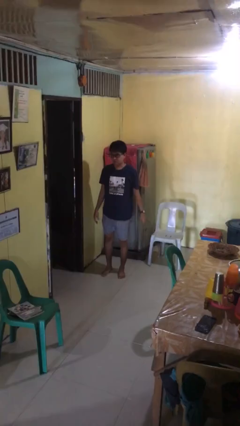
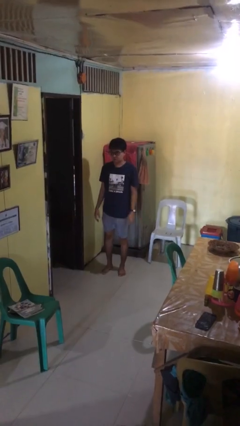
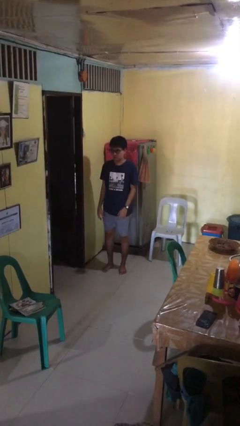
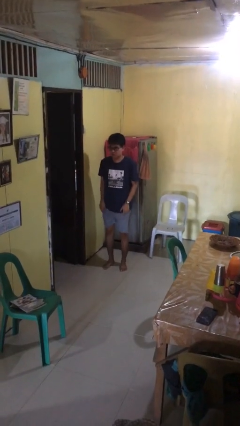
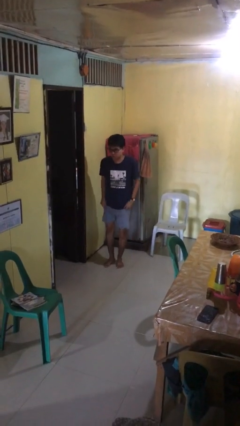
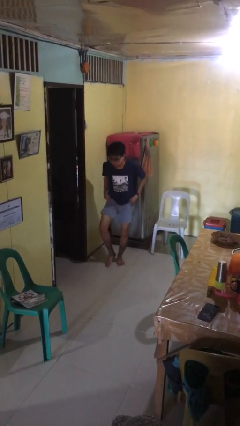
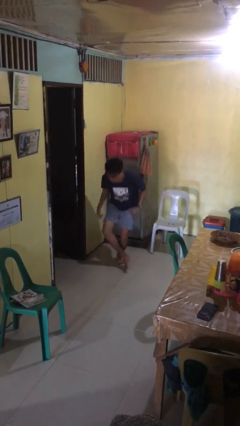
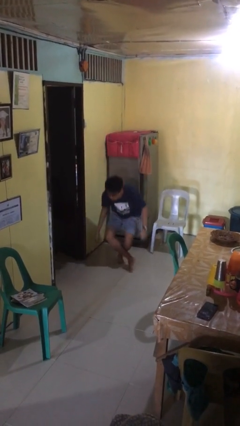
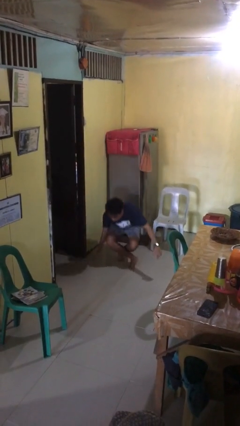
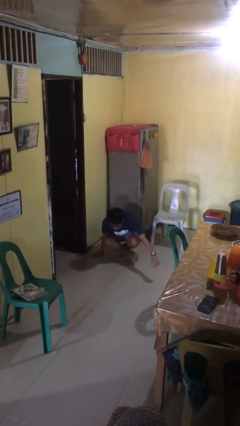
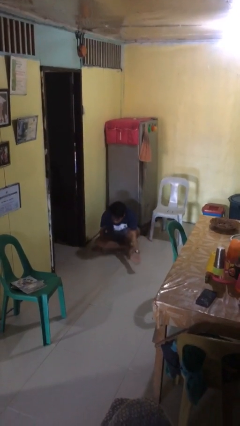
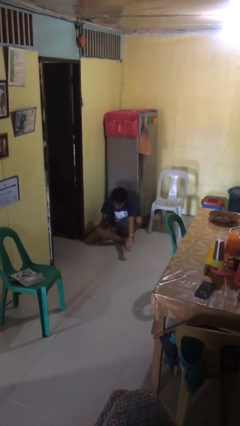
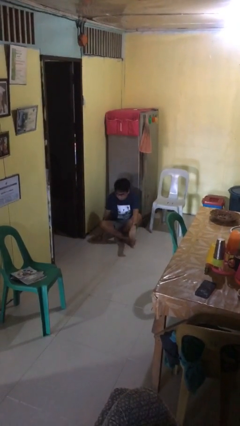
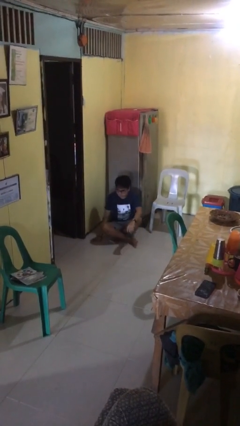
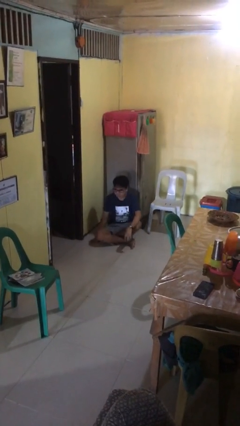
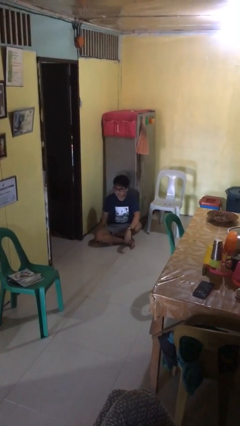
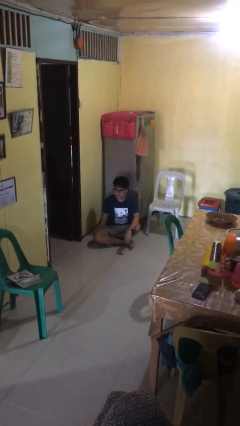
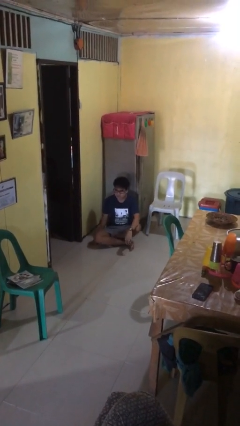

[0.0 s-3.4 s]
person sits crisscross

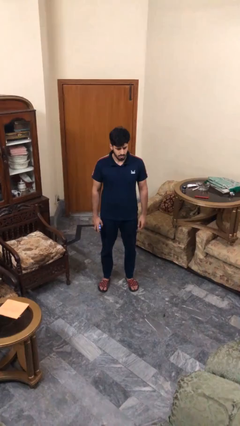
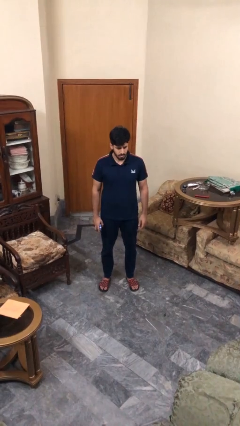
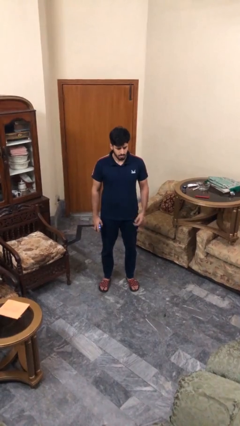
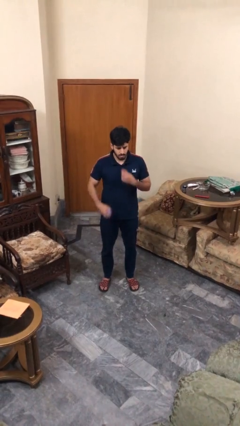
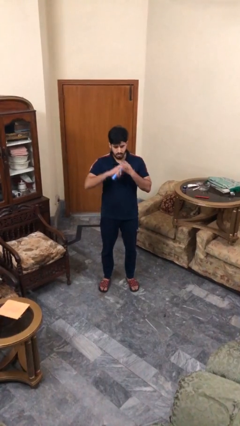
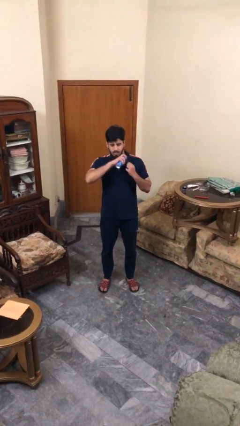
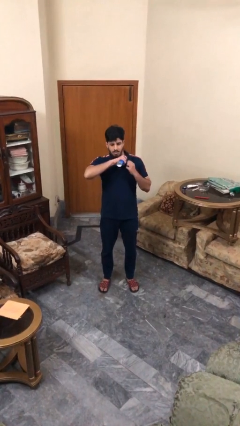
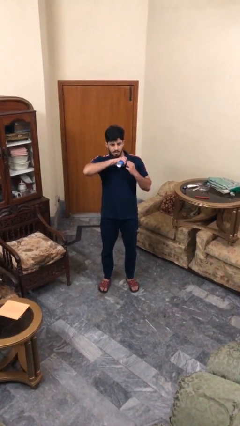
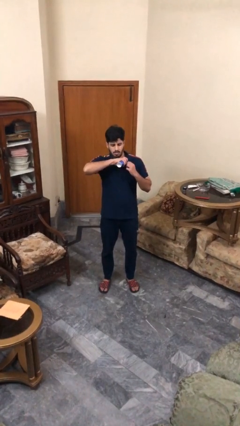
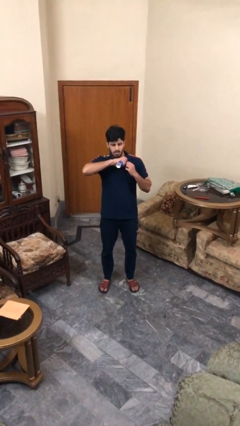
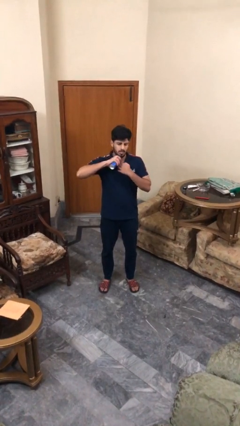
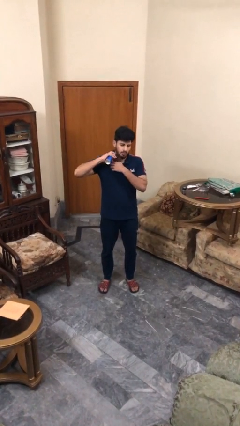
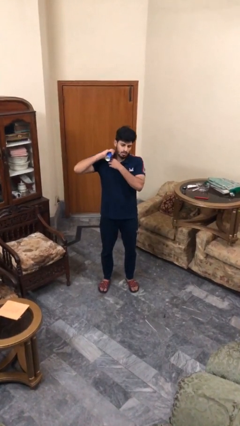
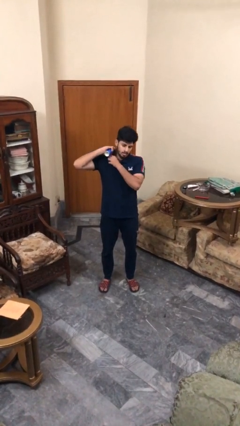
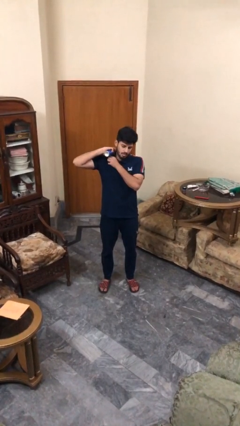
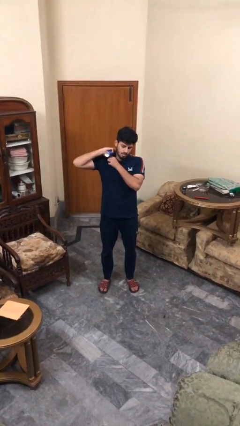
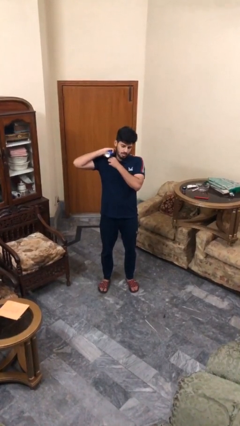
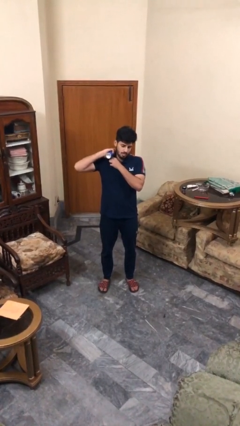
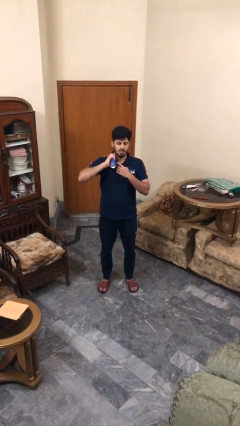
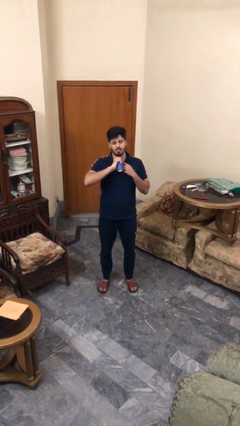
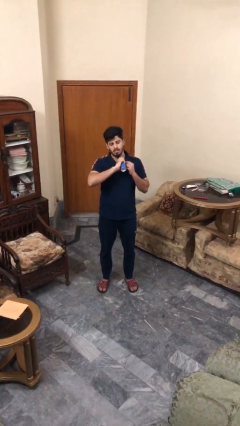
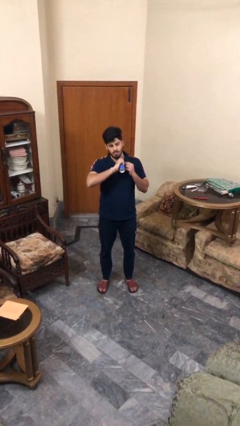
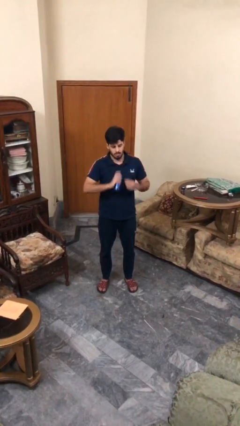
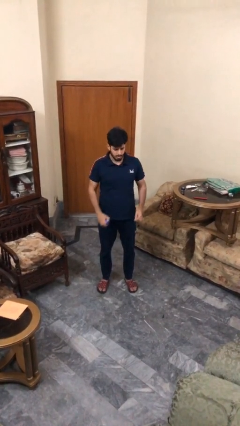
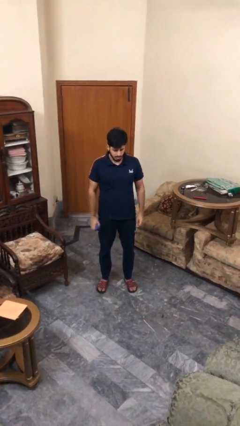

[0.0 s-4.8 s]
person applies deodorant

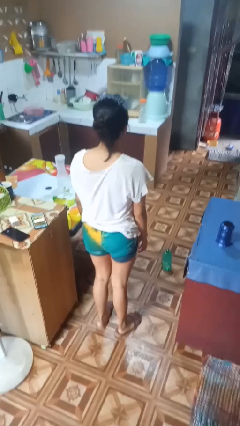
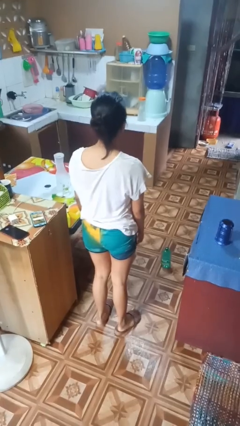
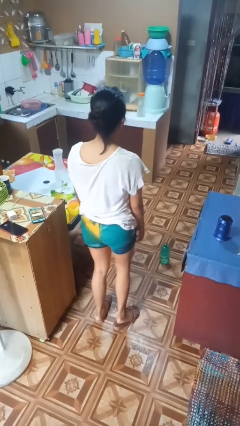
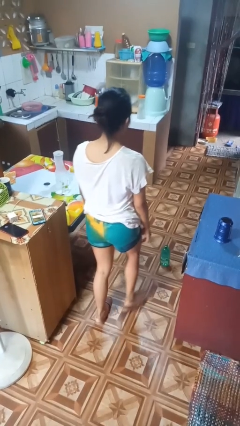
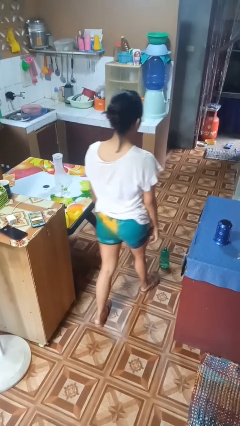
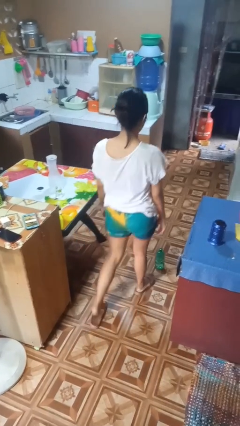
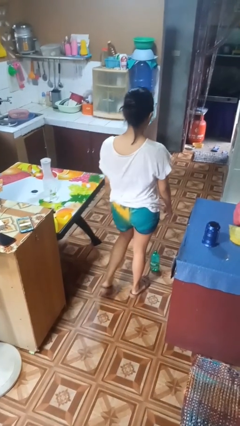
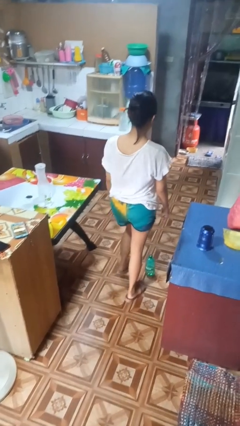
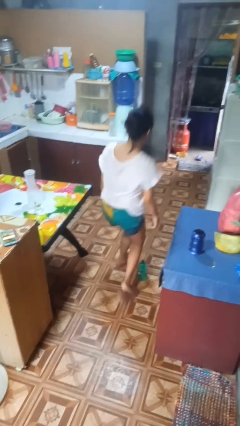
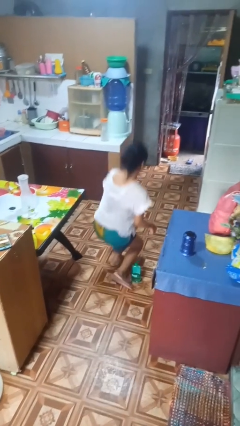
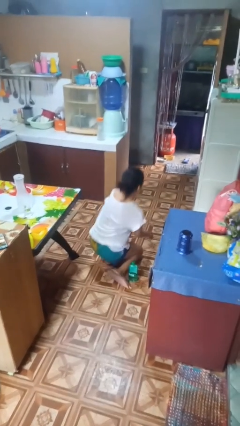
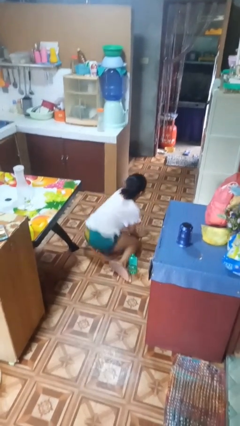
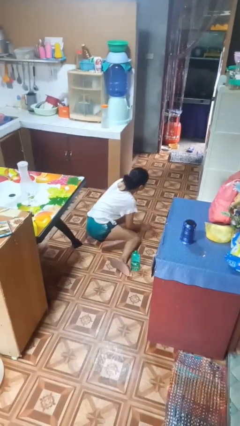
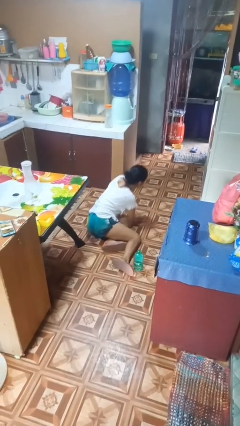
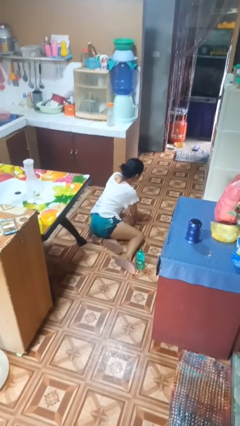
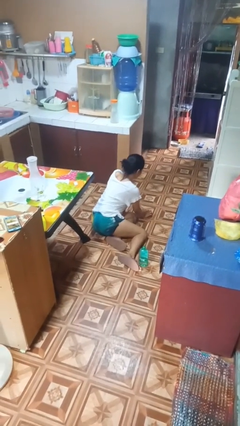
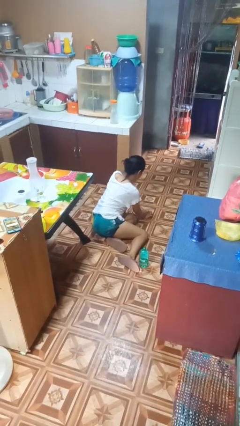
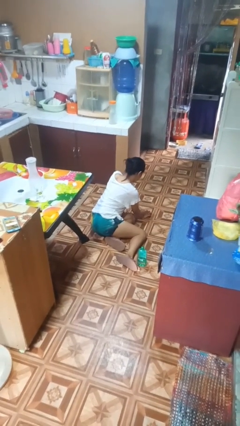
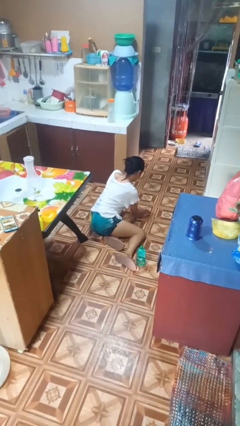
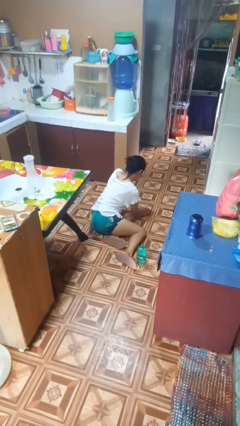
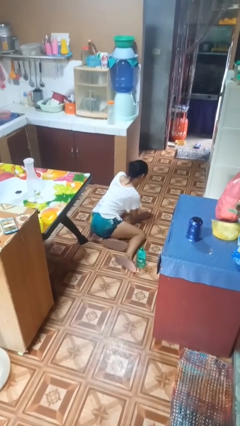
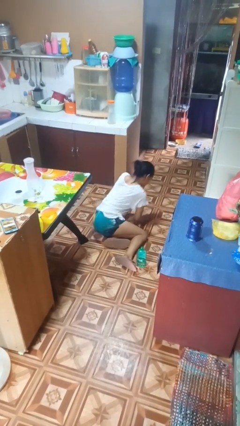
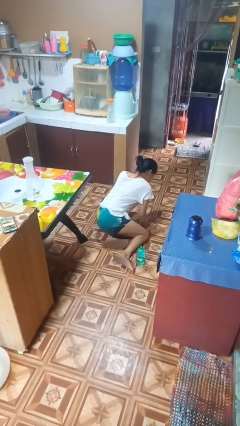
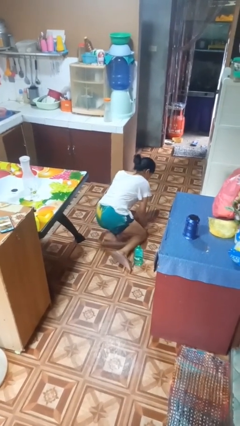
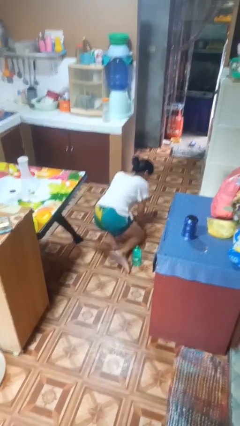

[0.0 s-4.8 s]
person trips on object on floor

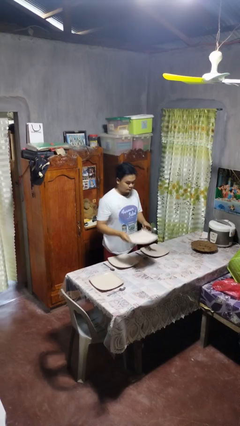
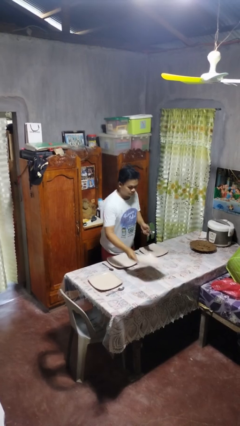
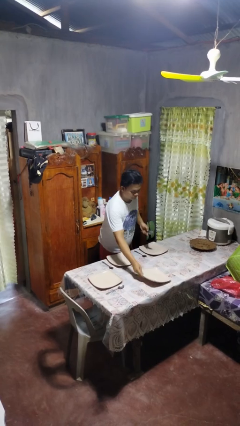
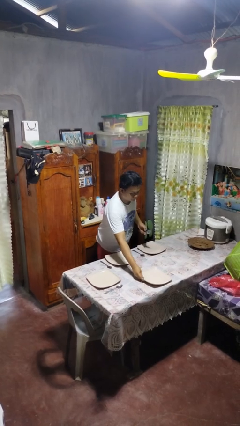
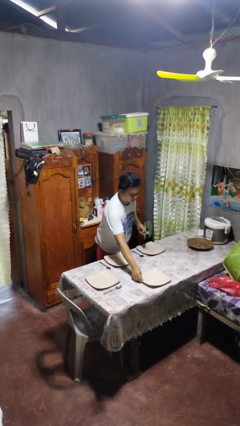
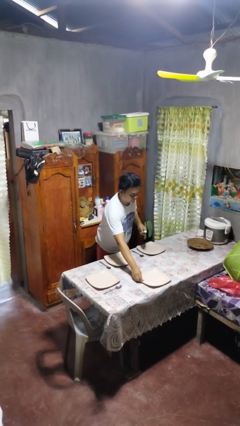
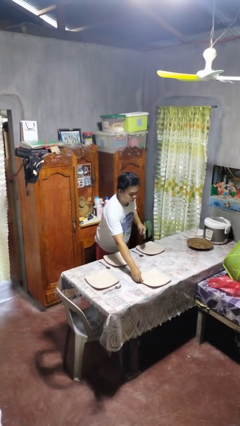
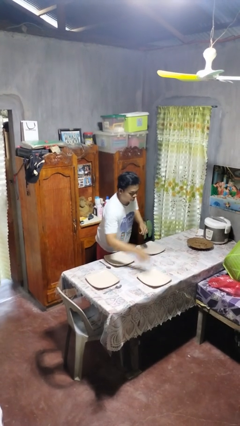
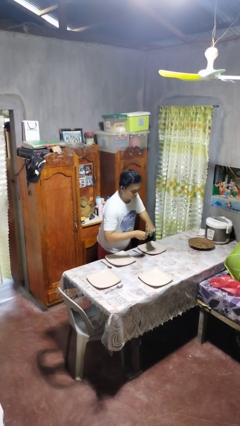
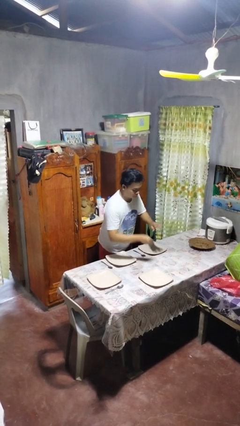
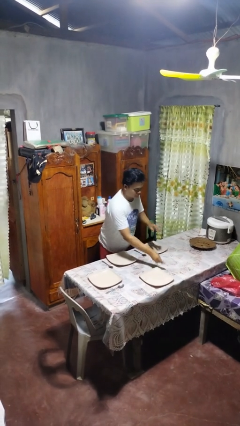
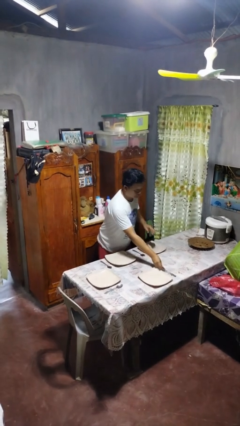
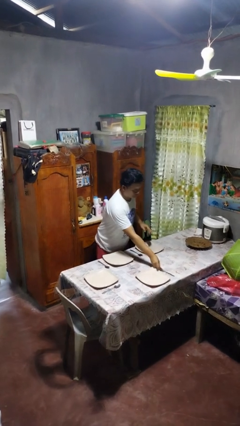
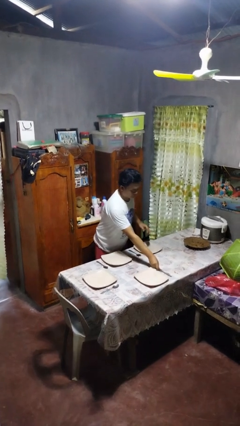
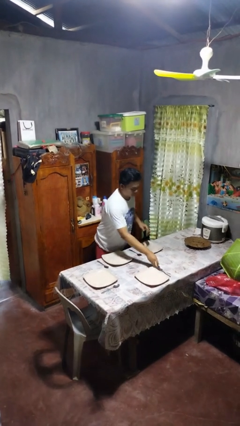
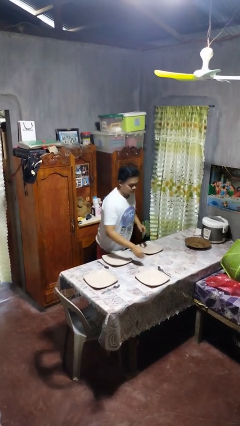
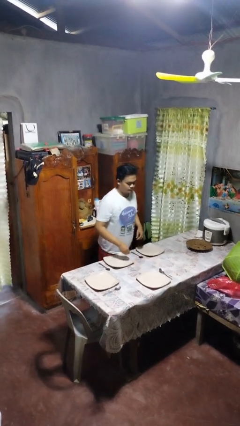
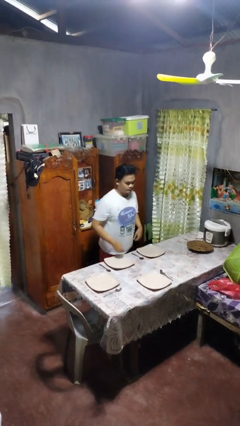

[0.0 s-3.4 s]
person sets table

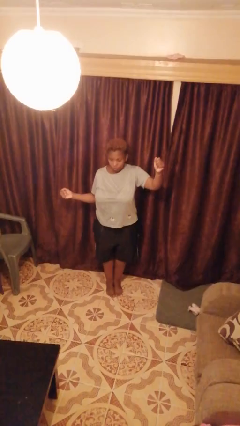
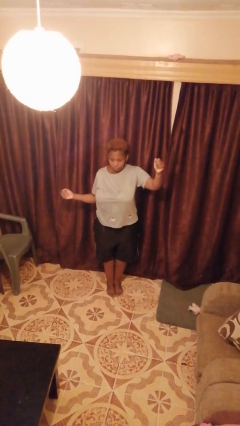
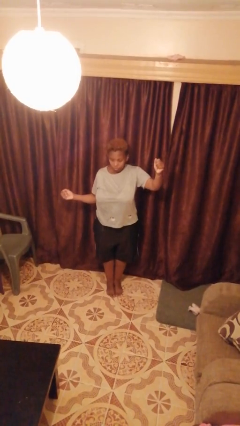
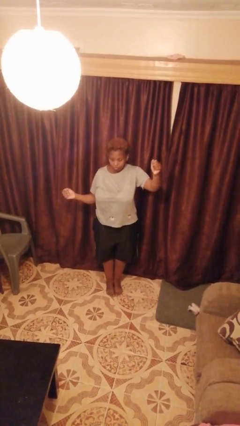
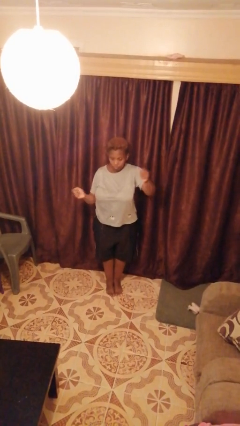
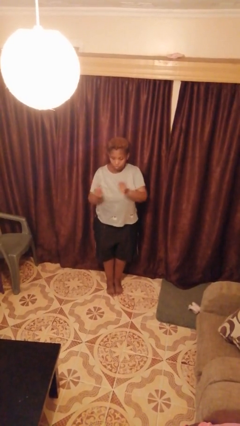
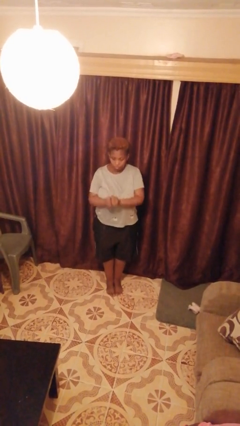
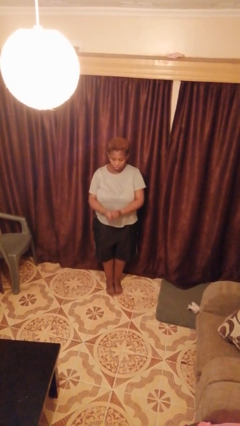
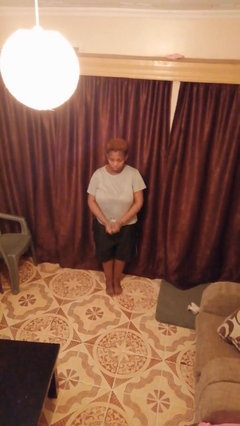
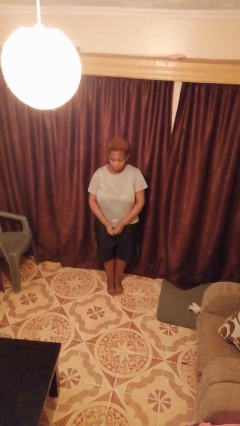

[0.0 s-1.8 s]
person gestures zoom out
